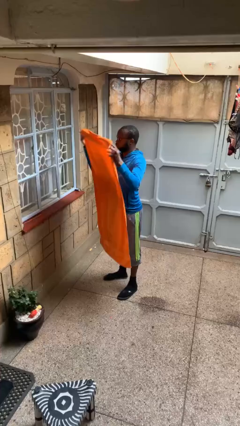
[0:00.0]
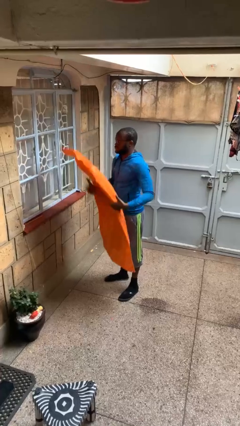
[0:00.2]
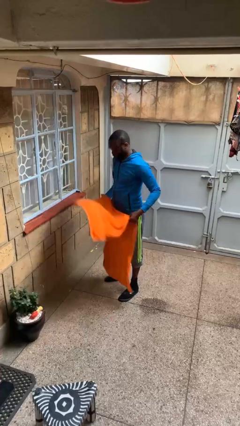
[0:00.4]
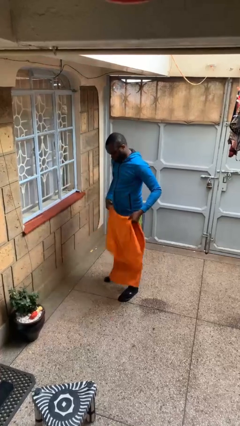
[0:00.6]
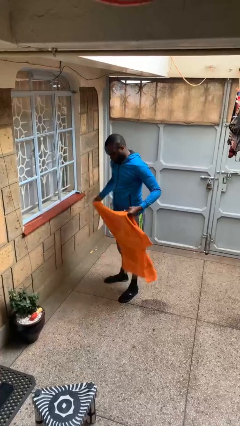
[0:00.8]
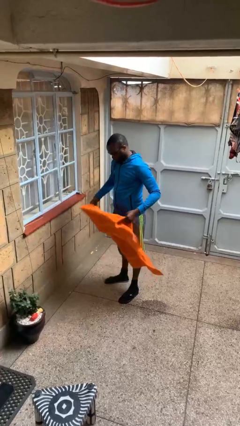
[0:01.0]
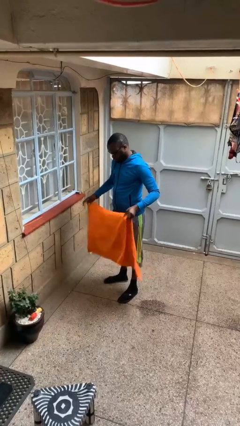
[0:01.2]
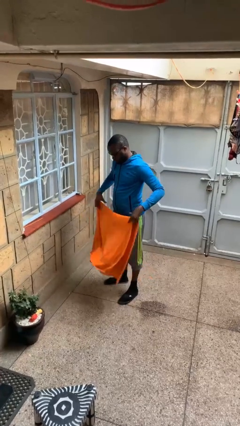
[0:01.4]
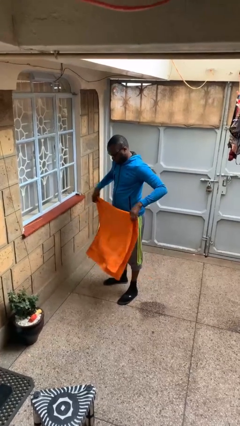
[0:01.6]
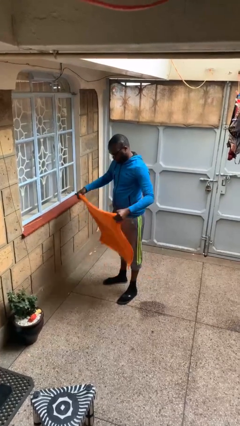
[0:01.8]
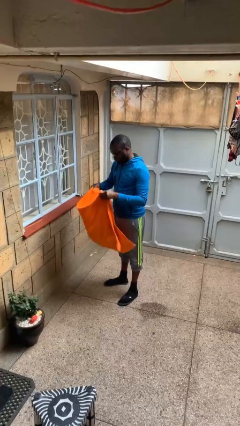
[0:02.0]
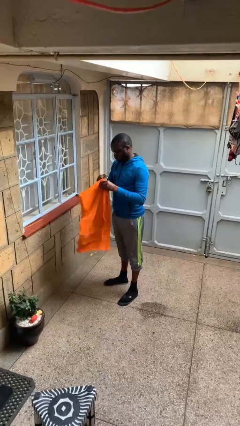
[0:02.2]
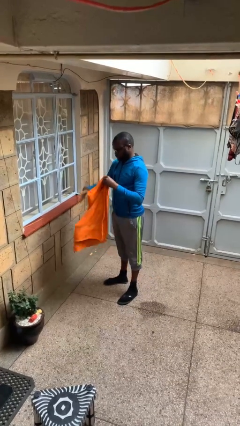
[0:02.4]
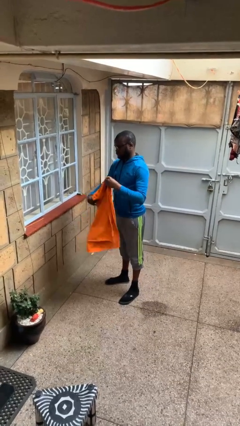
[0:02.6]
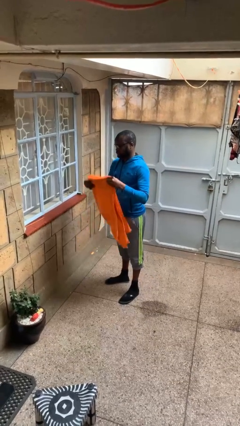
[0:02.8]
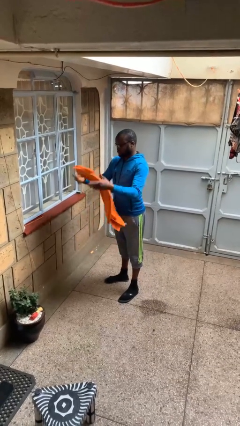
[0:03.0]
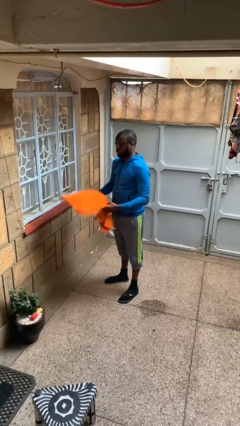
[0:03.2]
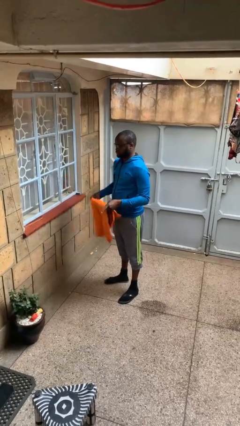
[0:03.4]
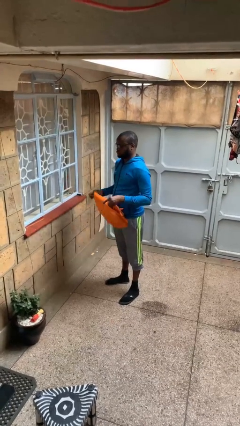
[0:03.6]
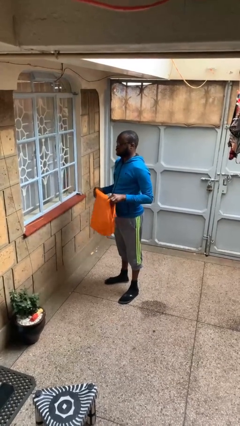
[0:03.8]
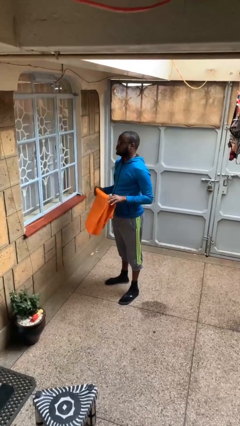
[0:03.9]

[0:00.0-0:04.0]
person folds towel

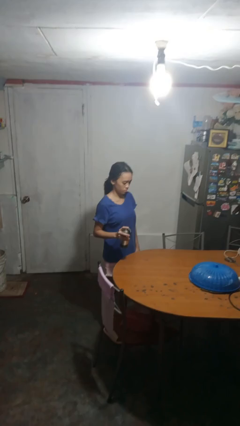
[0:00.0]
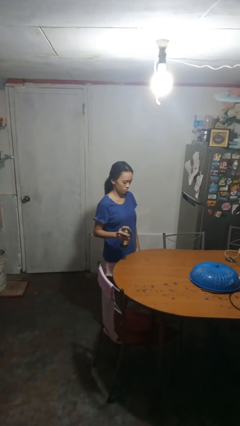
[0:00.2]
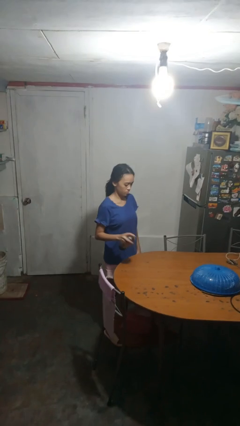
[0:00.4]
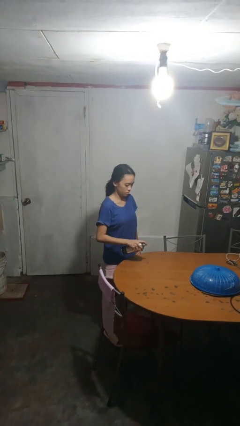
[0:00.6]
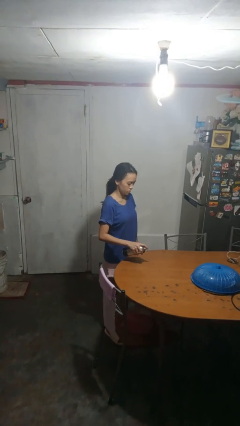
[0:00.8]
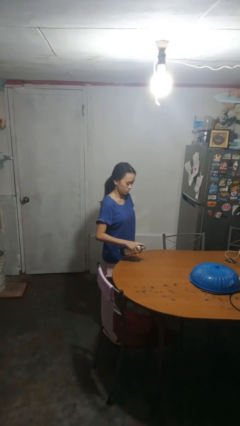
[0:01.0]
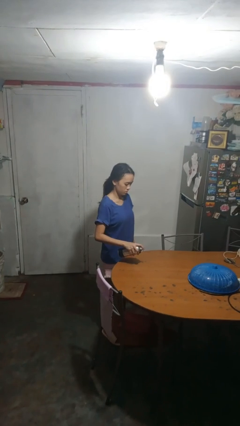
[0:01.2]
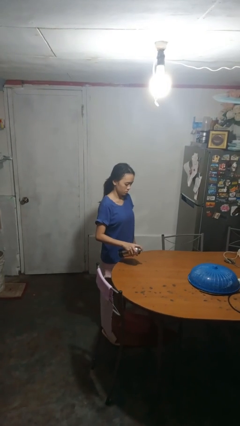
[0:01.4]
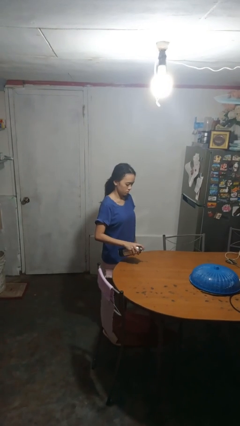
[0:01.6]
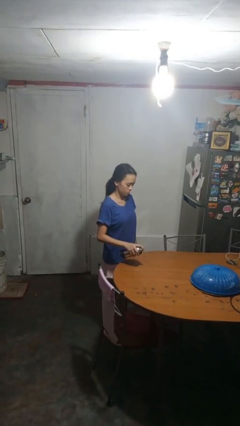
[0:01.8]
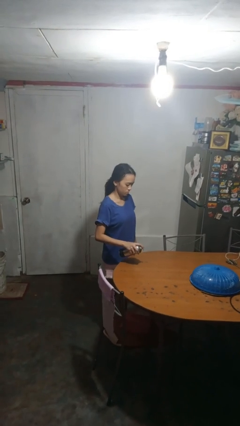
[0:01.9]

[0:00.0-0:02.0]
person sprays from bottle

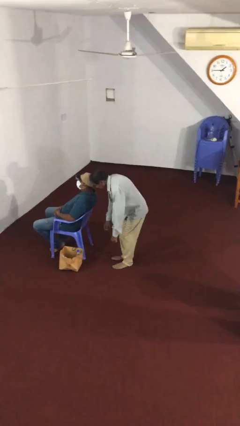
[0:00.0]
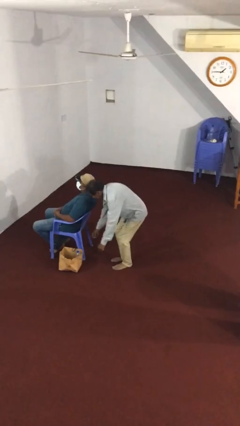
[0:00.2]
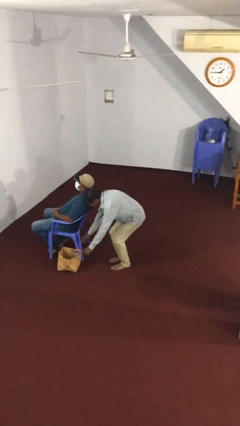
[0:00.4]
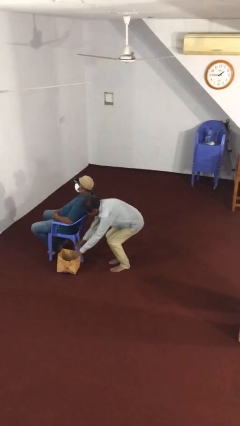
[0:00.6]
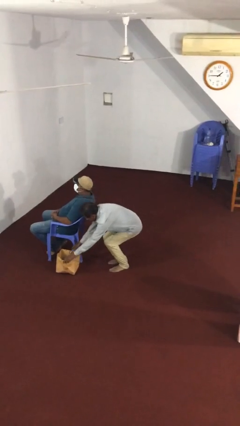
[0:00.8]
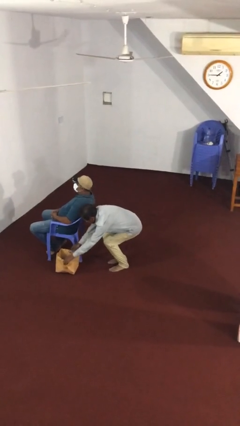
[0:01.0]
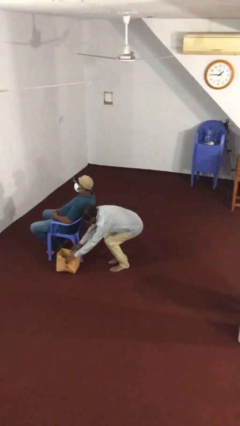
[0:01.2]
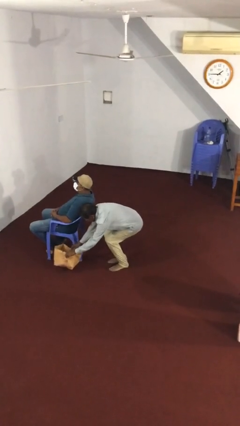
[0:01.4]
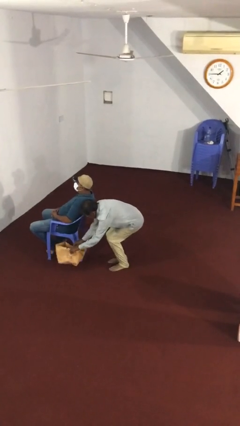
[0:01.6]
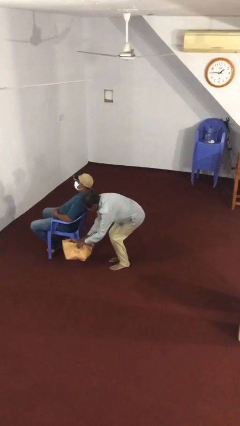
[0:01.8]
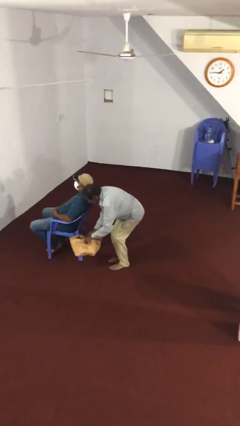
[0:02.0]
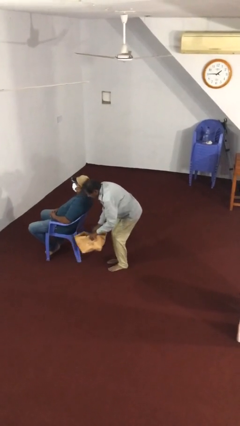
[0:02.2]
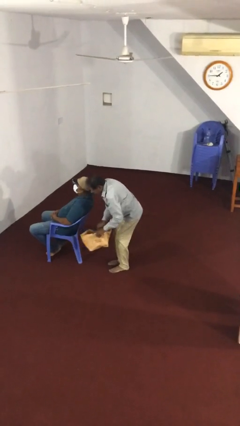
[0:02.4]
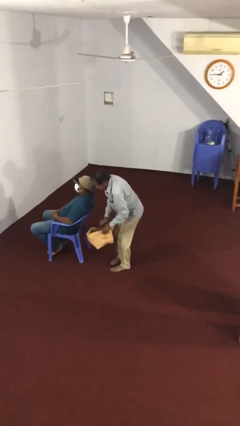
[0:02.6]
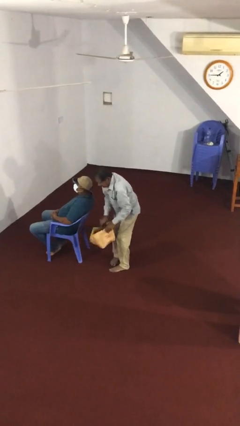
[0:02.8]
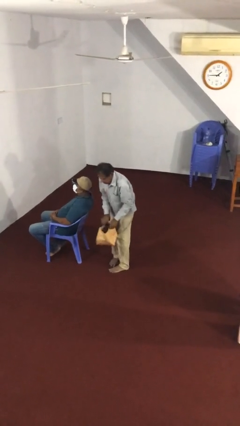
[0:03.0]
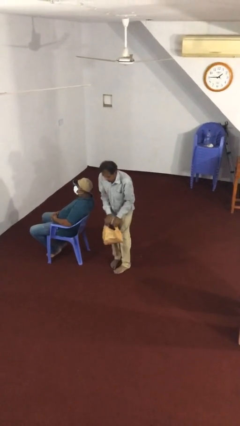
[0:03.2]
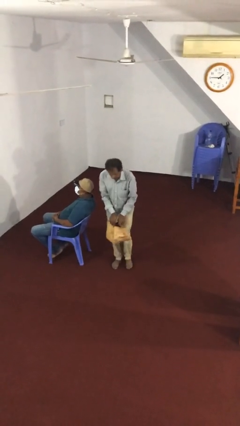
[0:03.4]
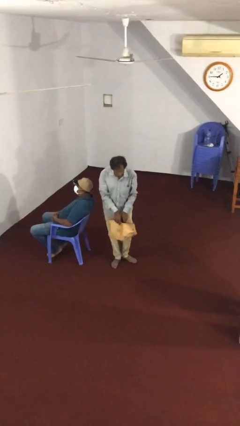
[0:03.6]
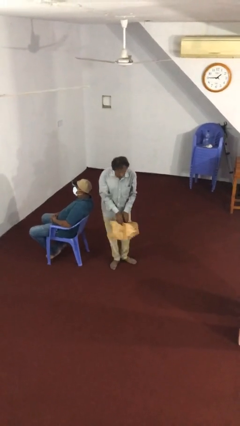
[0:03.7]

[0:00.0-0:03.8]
person steals object from person

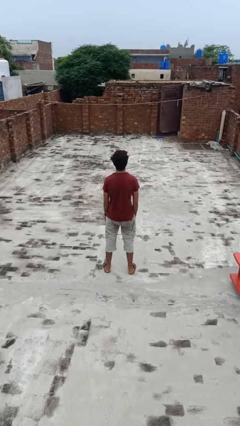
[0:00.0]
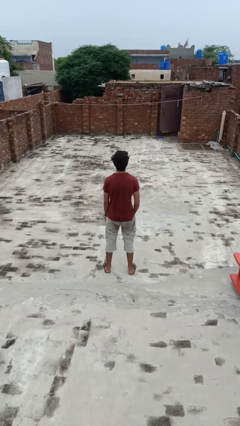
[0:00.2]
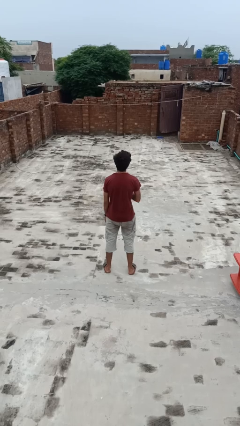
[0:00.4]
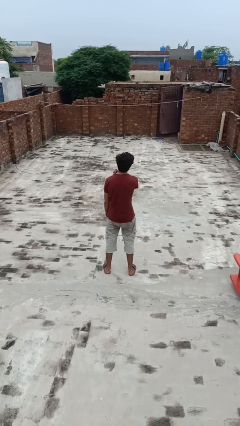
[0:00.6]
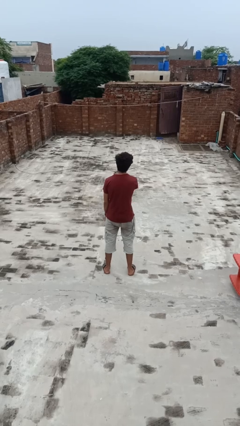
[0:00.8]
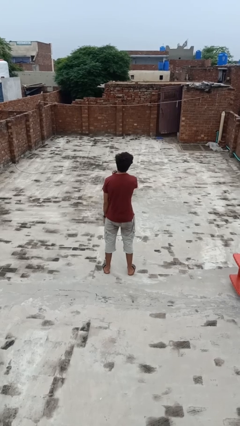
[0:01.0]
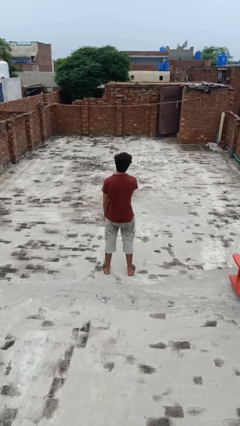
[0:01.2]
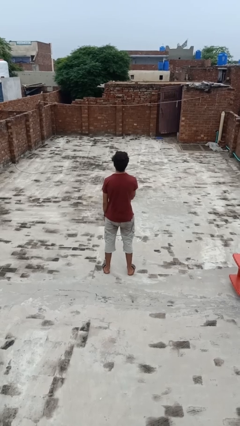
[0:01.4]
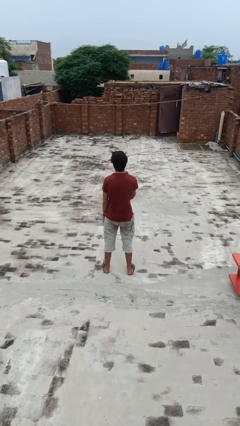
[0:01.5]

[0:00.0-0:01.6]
person strokes chin

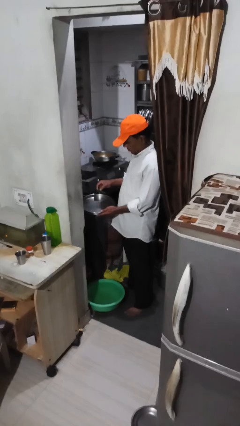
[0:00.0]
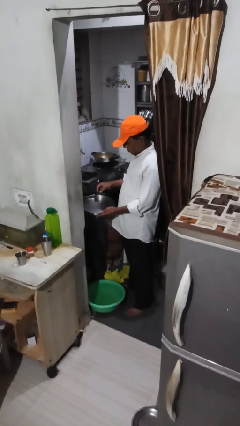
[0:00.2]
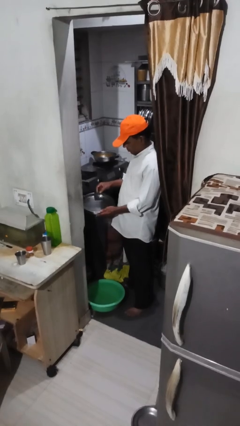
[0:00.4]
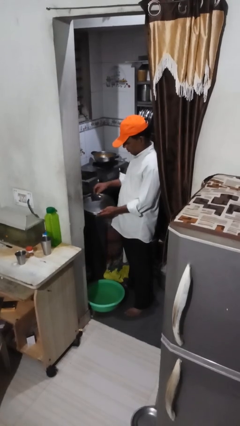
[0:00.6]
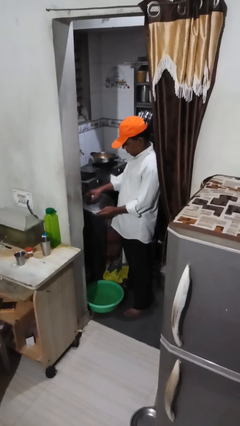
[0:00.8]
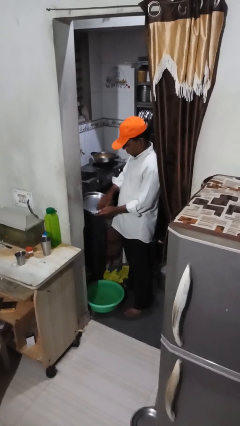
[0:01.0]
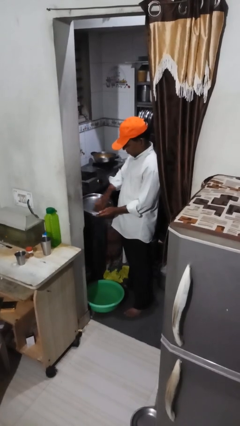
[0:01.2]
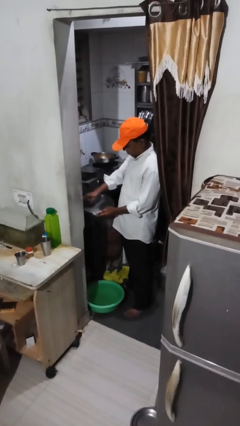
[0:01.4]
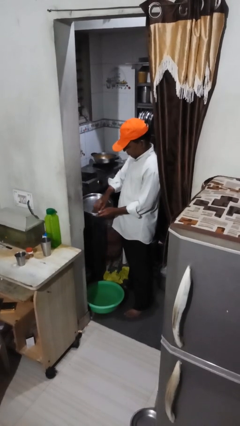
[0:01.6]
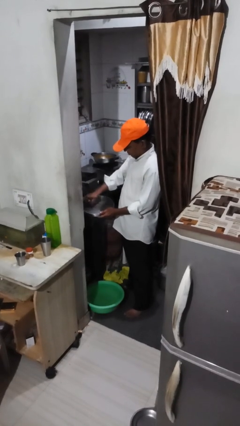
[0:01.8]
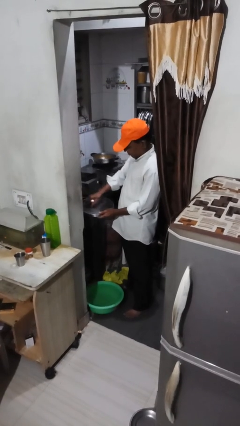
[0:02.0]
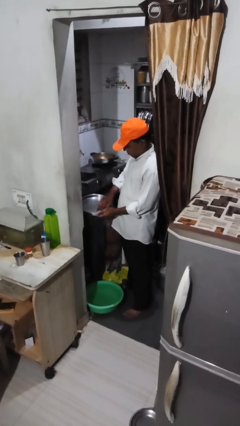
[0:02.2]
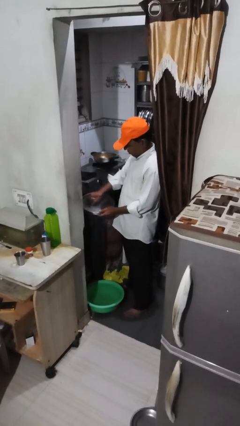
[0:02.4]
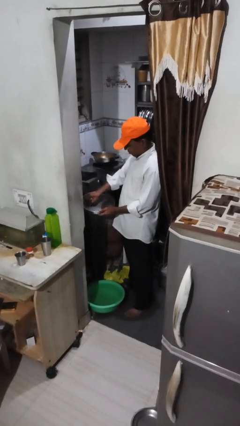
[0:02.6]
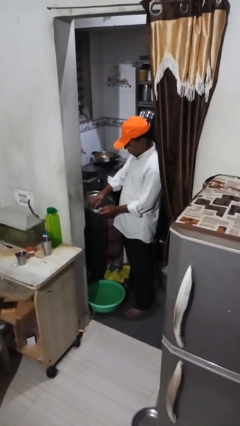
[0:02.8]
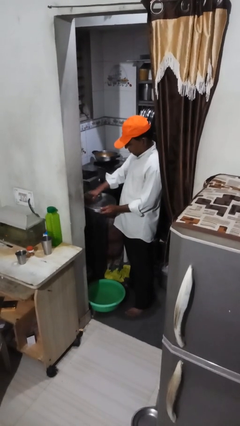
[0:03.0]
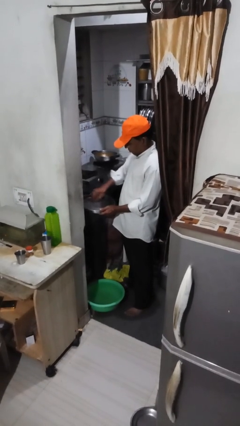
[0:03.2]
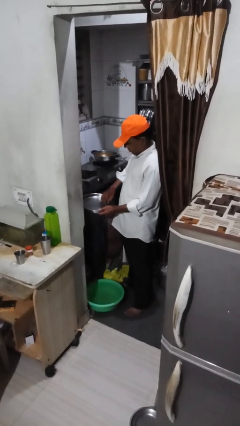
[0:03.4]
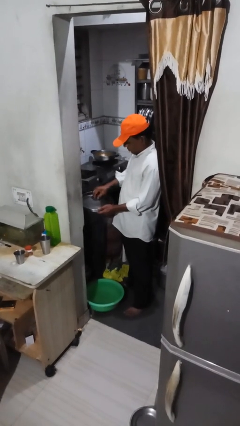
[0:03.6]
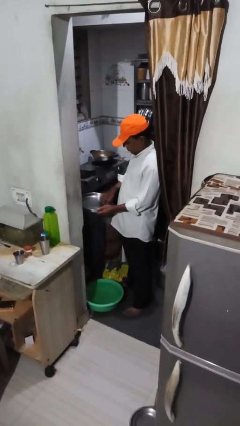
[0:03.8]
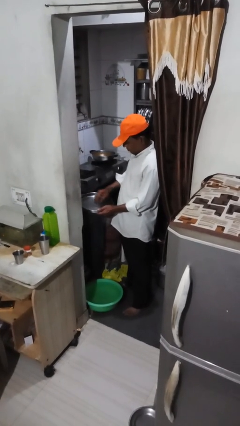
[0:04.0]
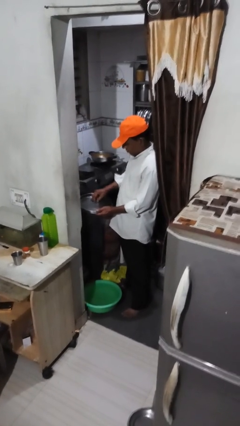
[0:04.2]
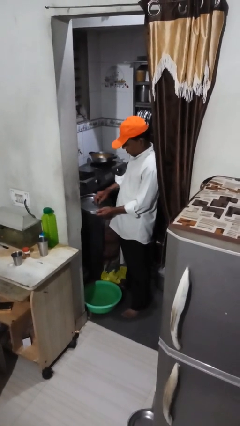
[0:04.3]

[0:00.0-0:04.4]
person washes dish

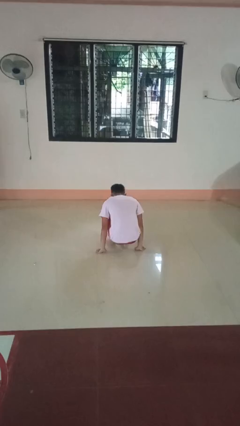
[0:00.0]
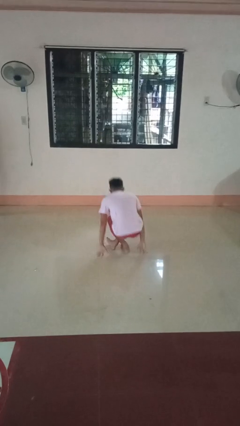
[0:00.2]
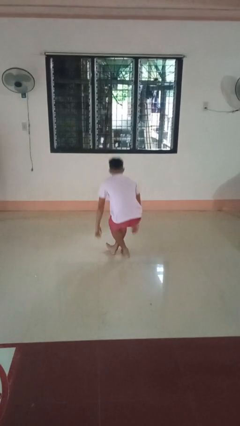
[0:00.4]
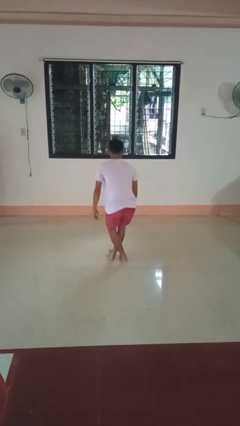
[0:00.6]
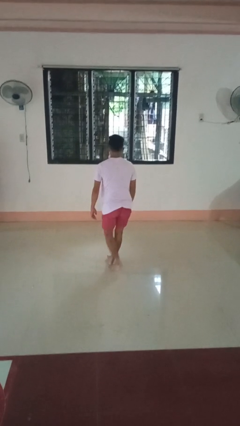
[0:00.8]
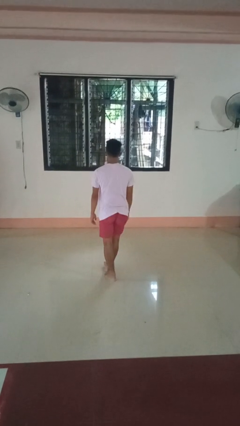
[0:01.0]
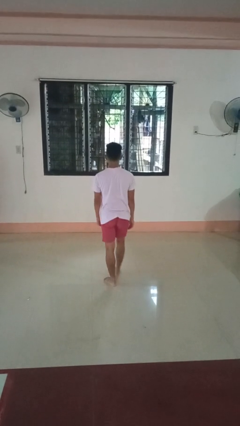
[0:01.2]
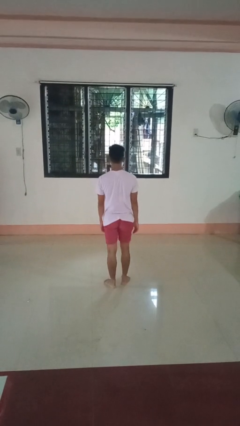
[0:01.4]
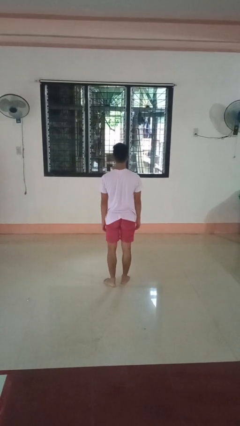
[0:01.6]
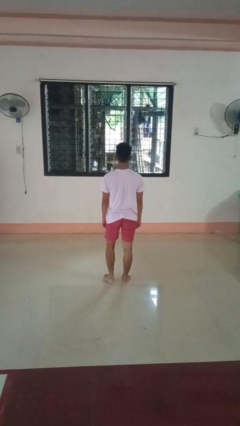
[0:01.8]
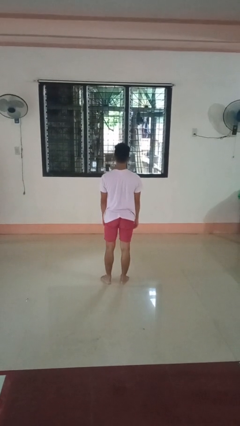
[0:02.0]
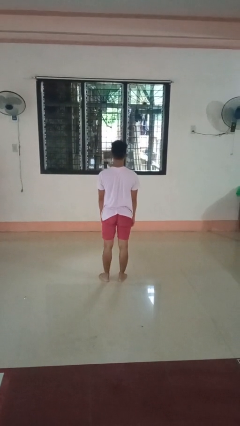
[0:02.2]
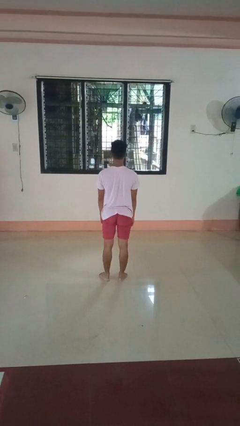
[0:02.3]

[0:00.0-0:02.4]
person stands up from floor
